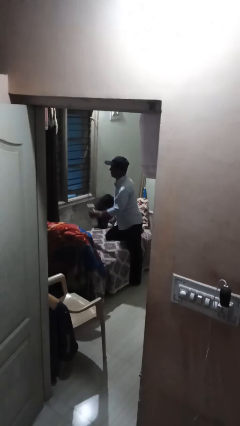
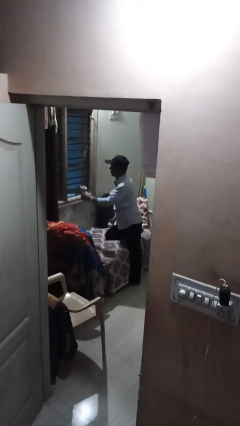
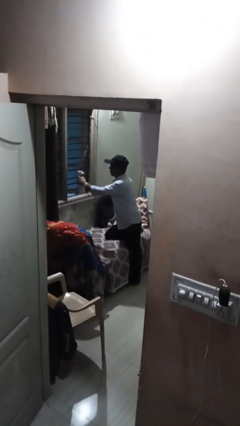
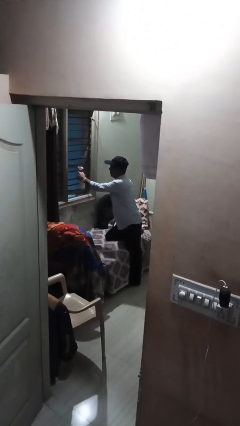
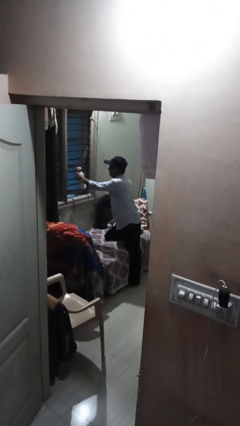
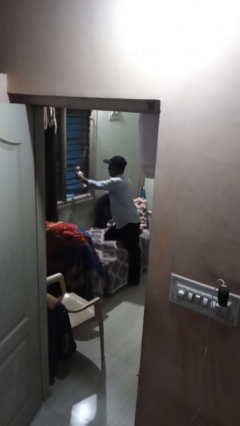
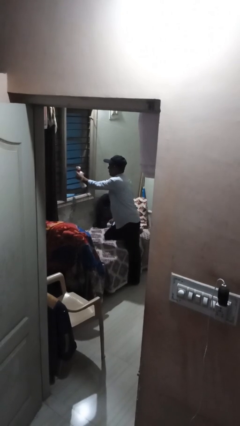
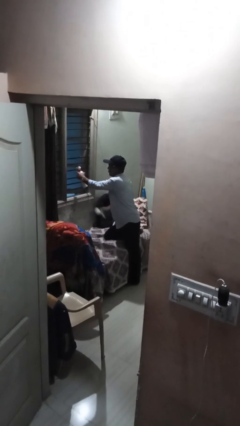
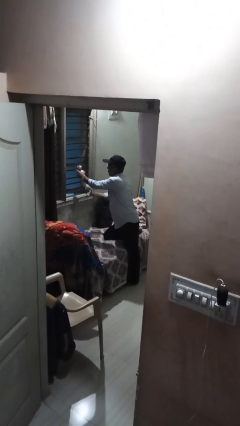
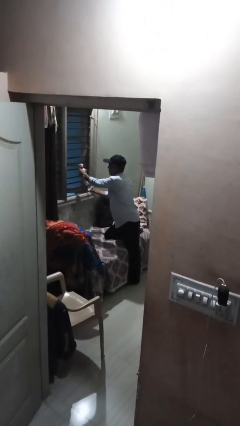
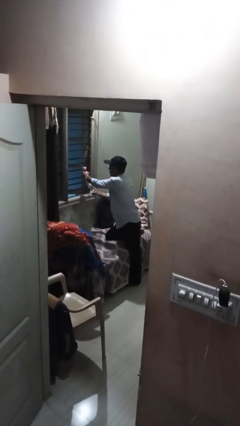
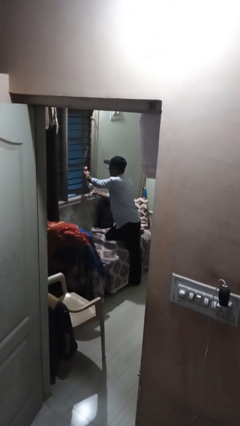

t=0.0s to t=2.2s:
person sprays from bottle

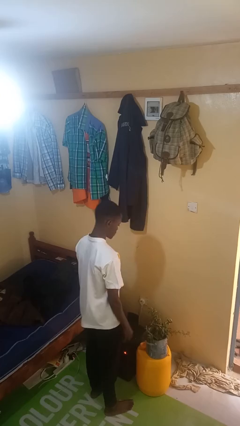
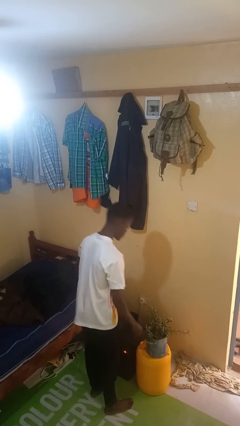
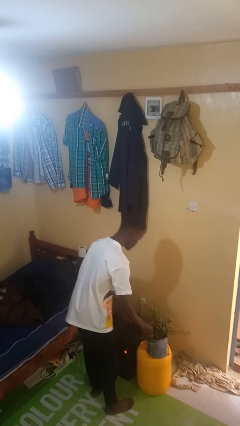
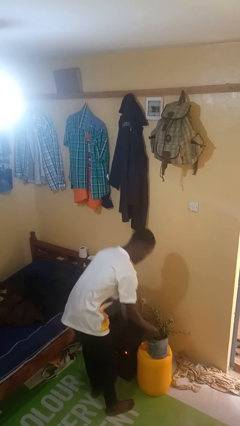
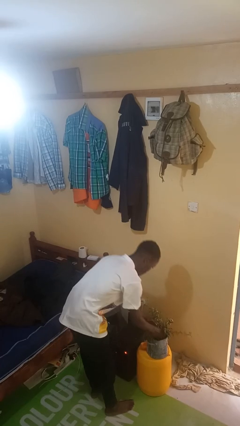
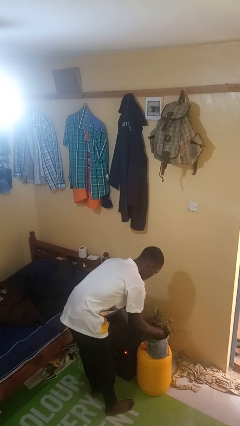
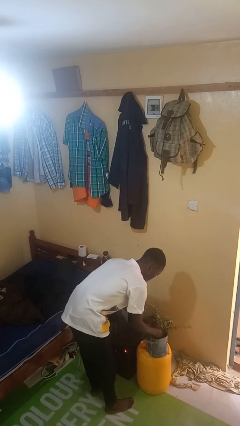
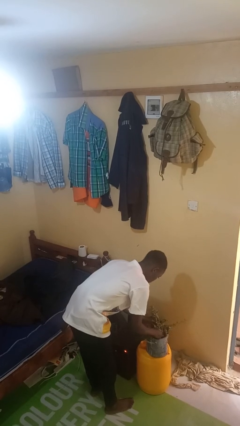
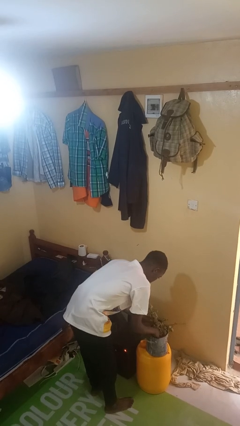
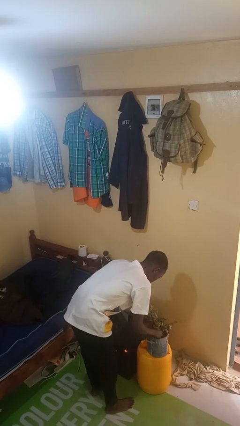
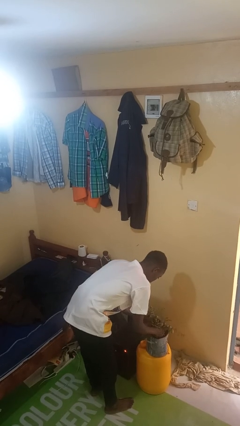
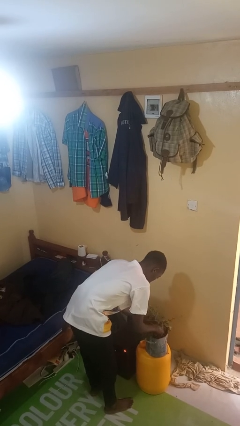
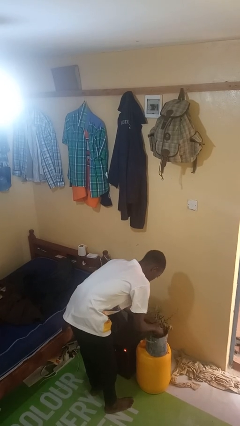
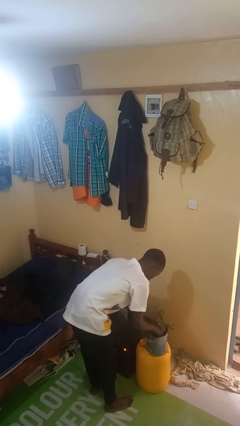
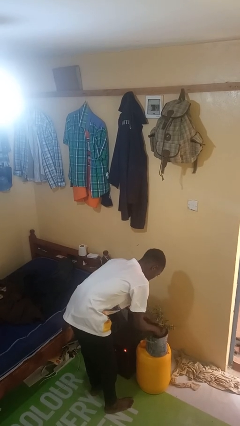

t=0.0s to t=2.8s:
person arranges flowers in vase

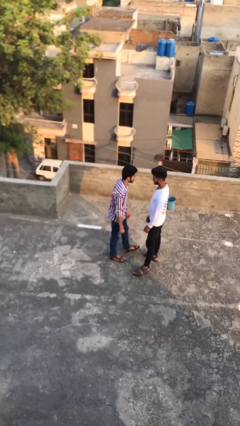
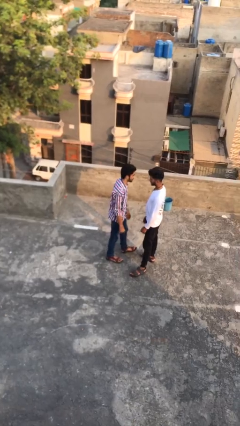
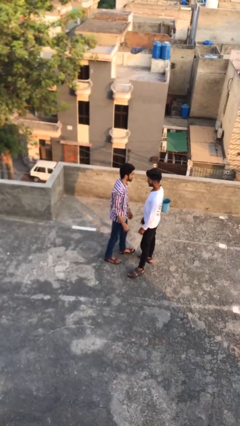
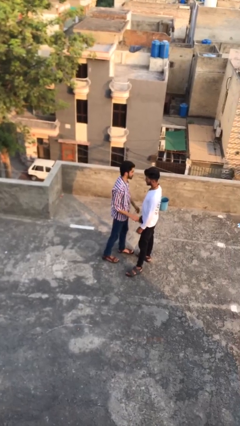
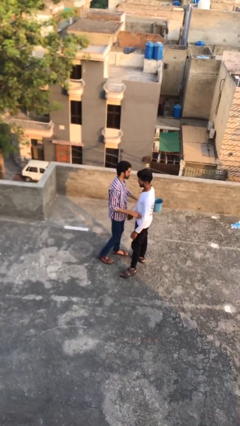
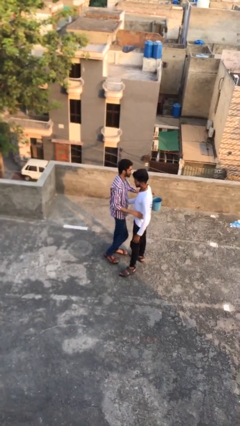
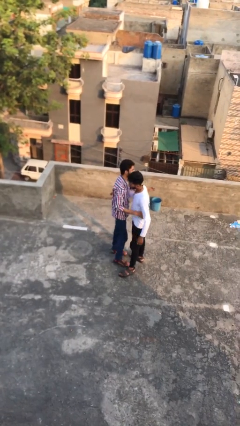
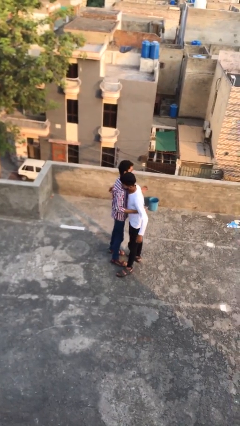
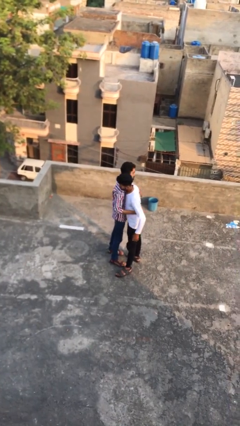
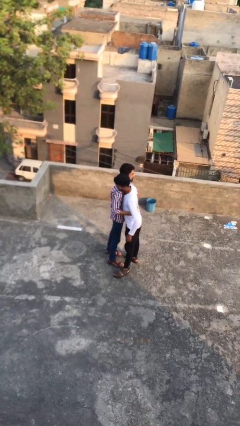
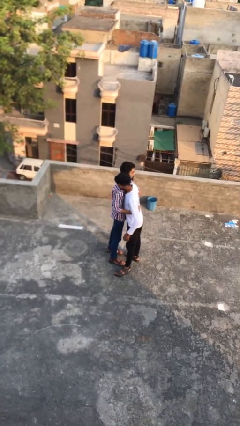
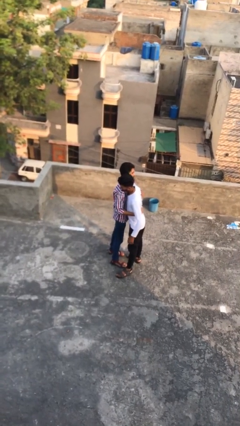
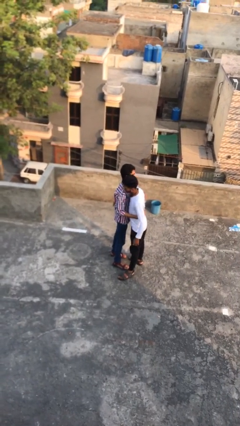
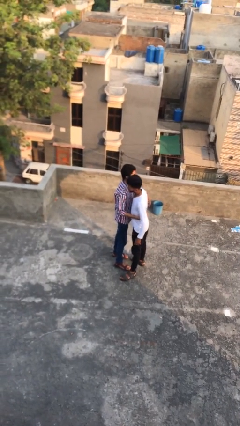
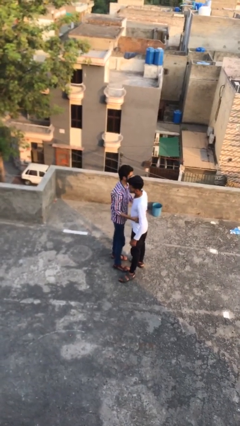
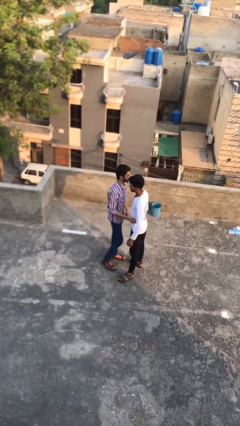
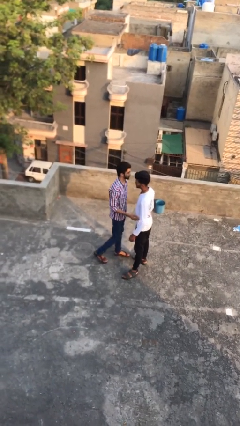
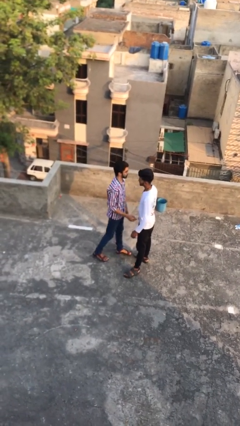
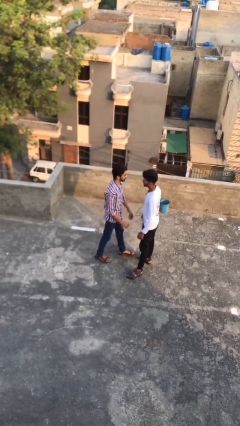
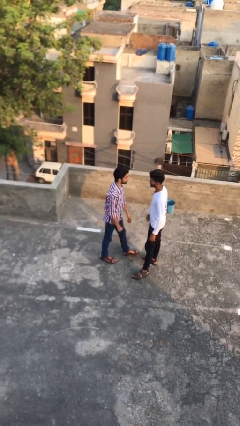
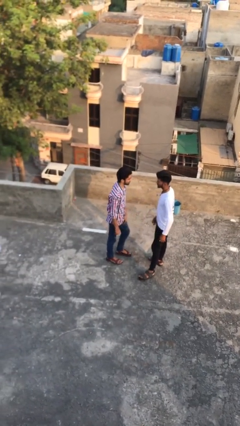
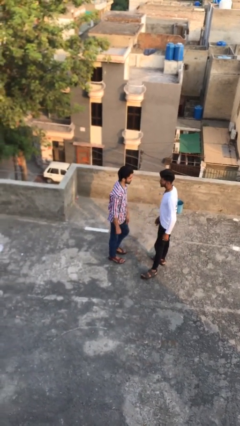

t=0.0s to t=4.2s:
person embraces person

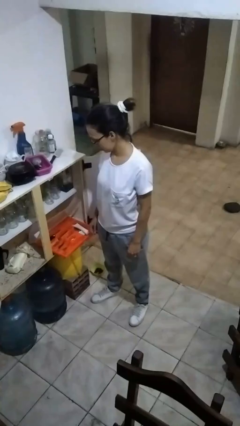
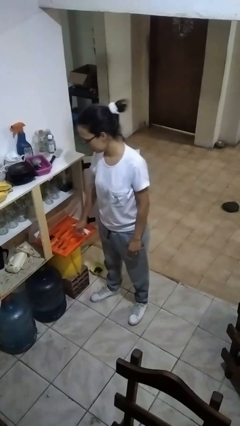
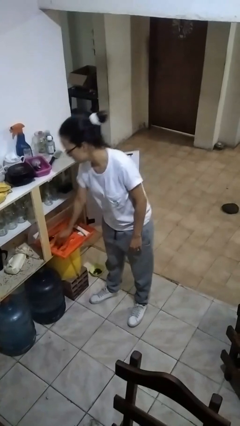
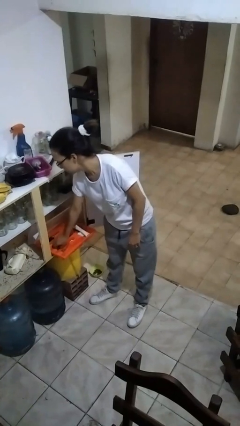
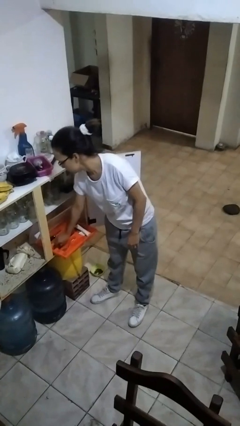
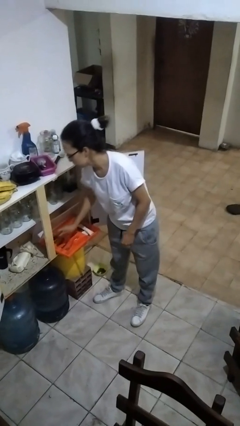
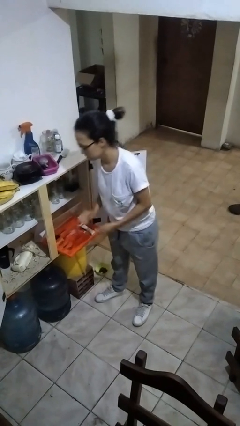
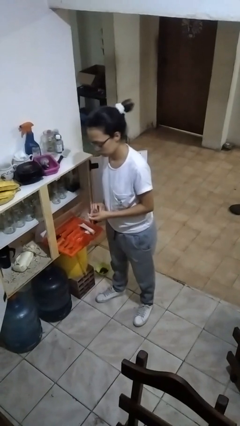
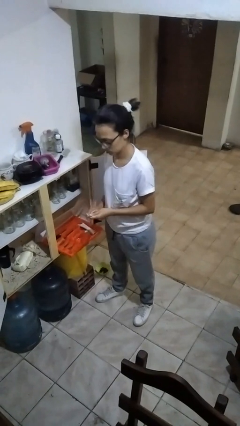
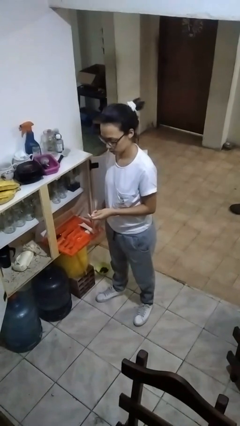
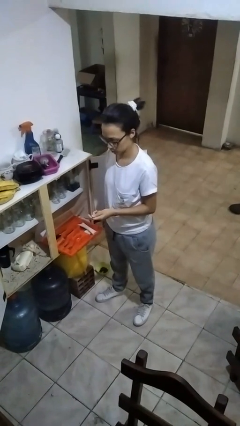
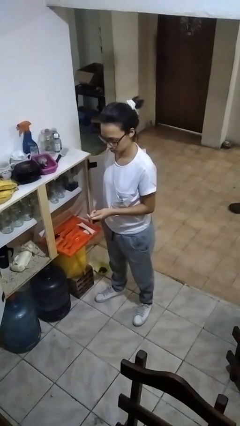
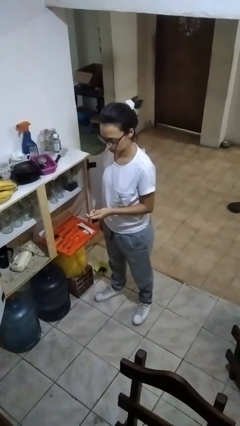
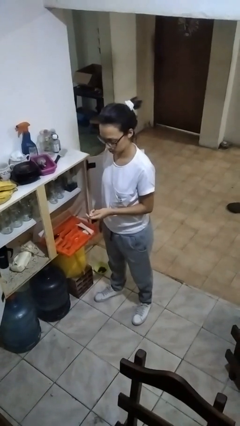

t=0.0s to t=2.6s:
person takes object from kitchen drawer

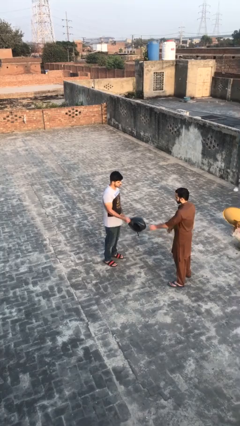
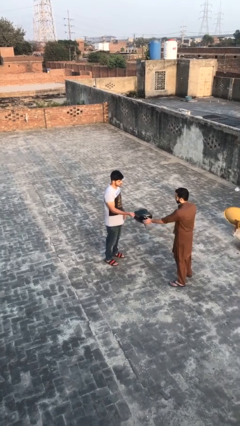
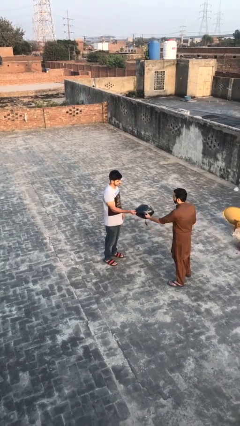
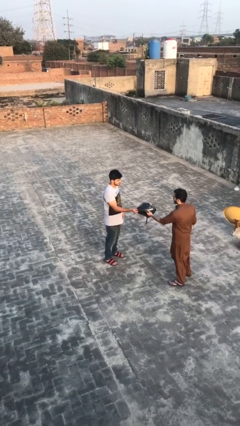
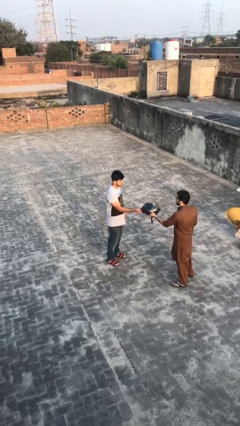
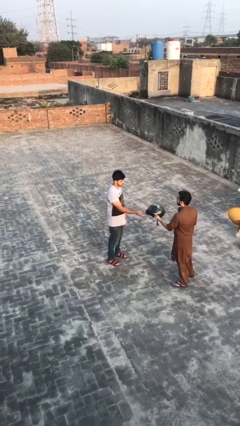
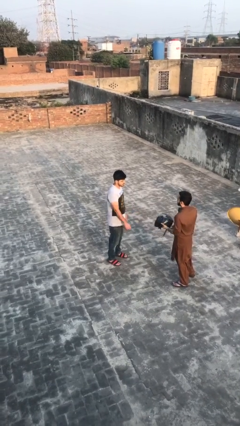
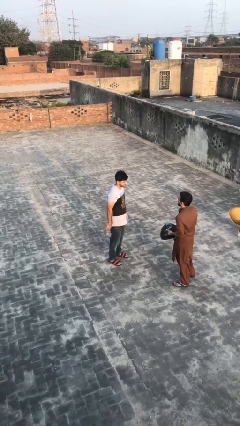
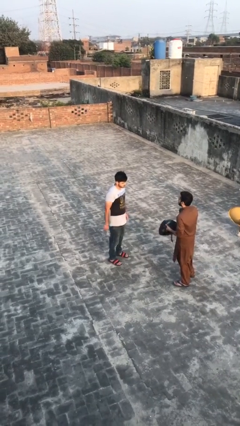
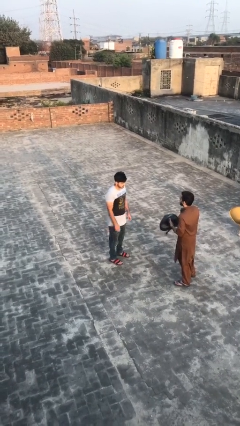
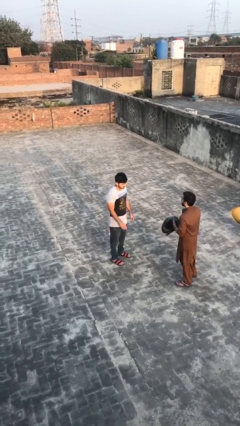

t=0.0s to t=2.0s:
person transfers object to person

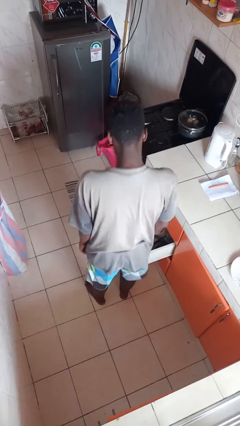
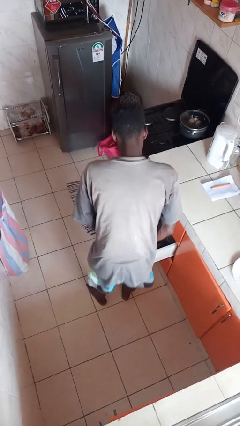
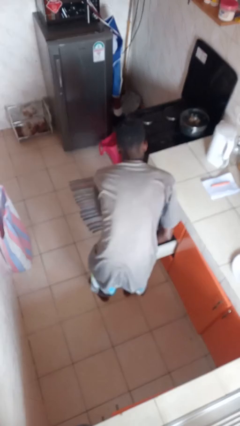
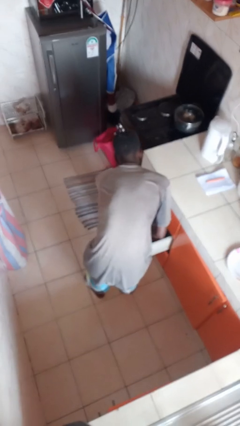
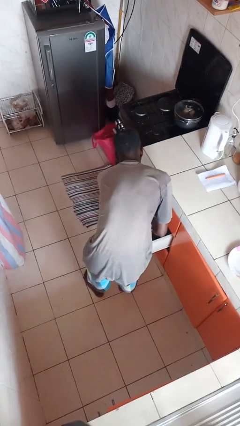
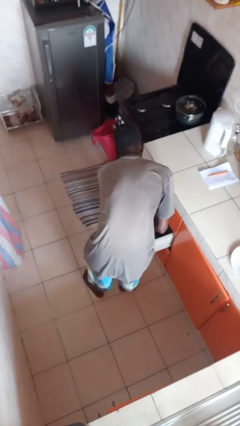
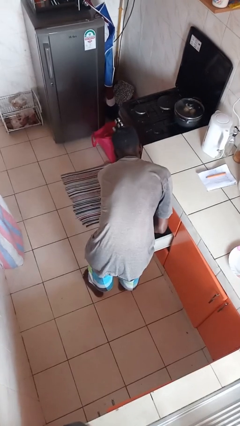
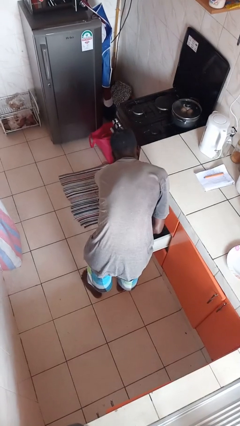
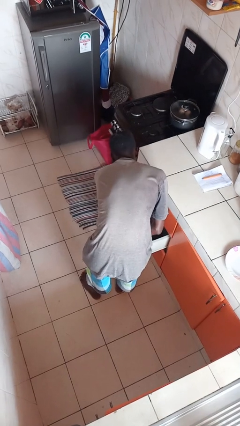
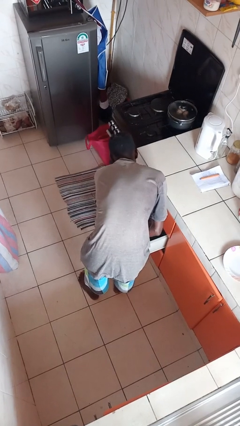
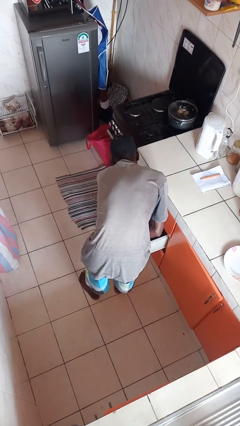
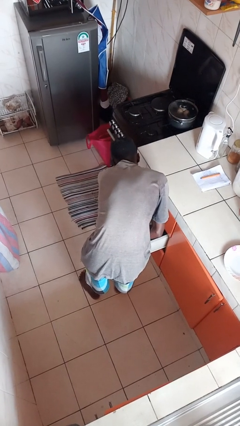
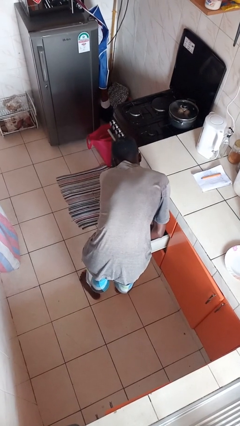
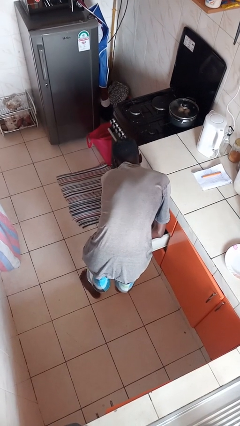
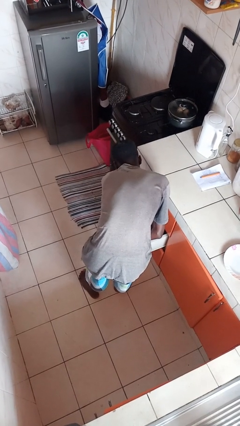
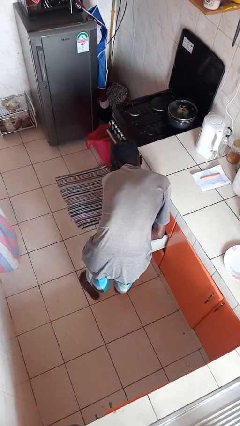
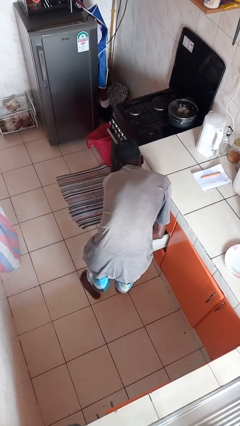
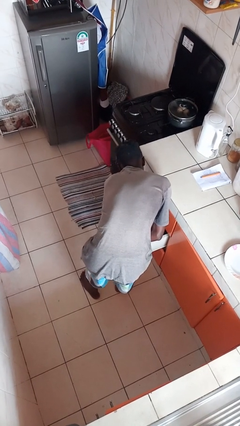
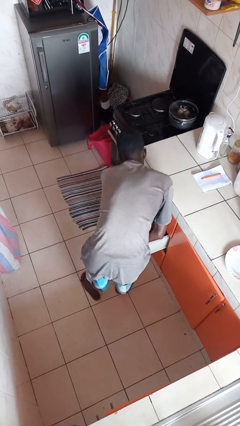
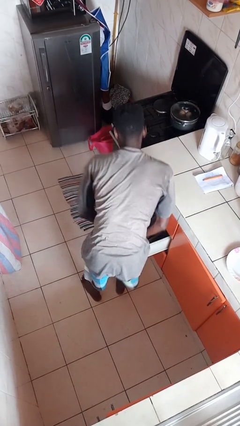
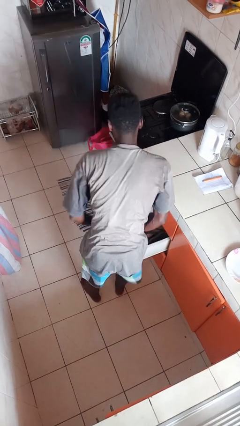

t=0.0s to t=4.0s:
person searches in kitchen drawer
